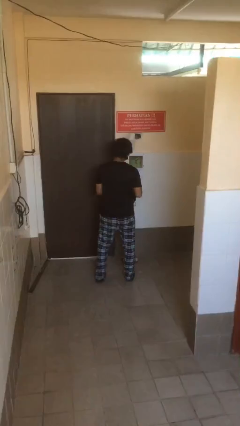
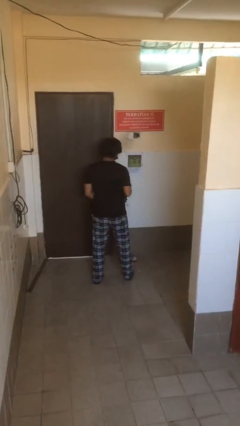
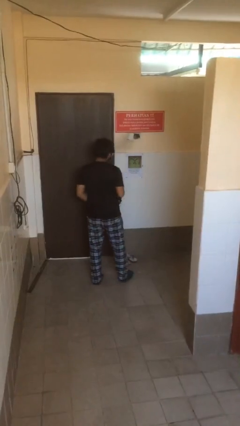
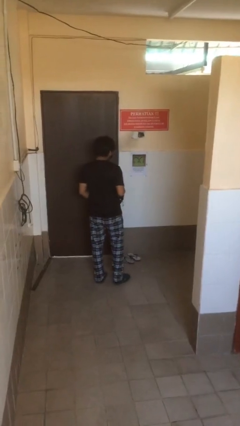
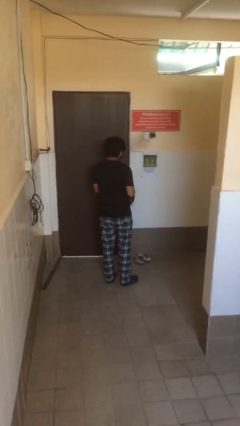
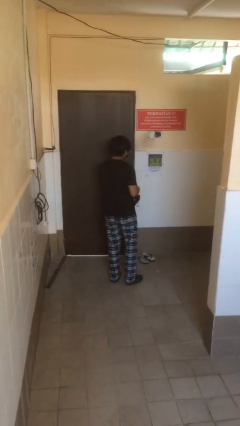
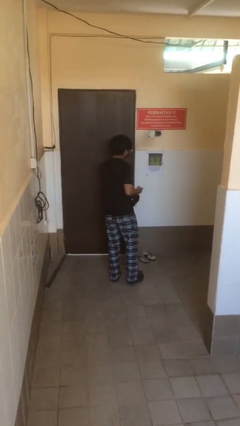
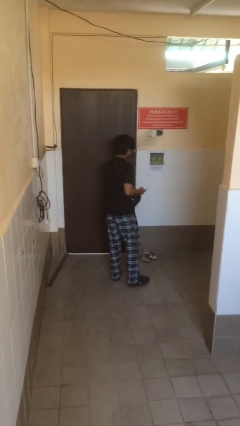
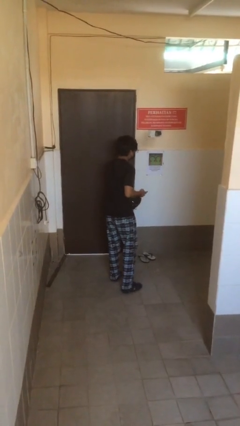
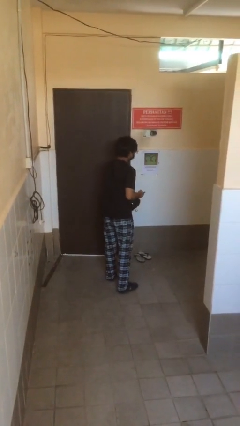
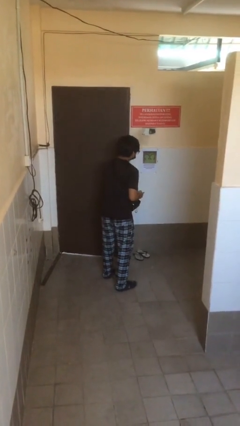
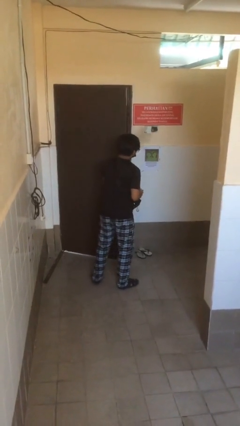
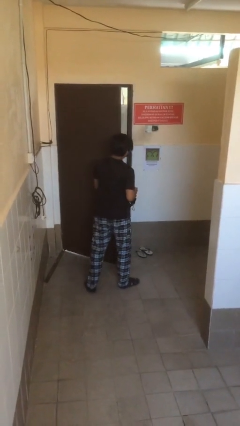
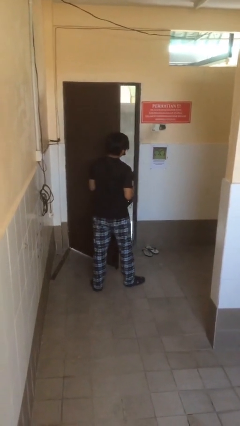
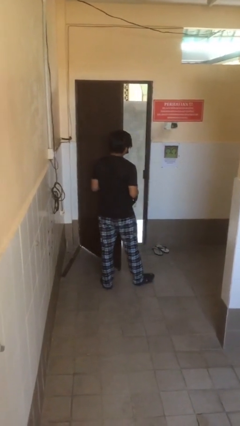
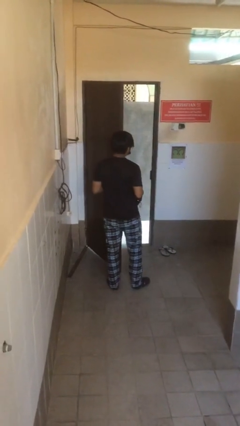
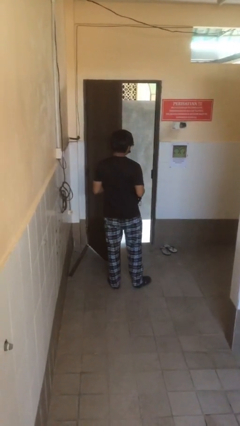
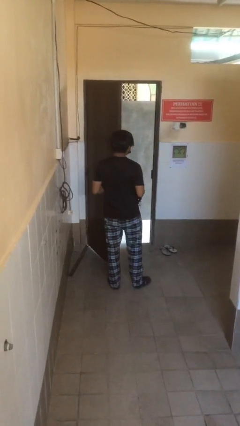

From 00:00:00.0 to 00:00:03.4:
person opens facility door

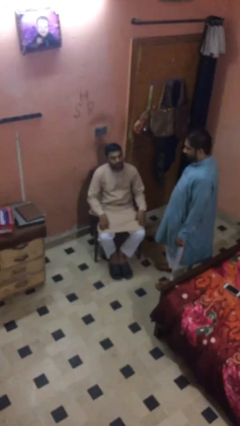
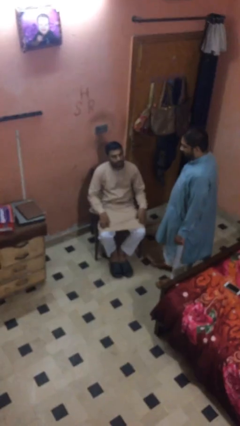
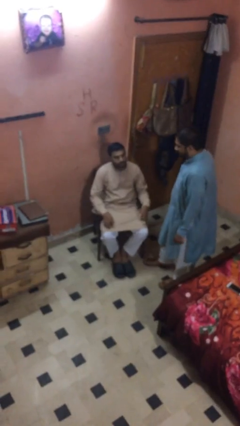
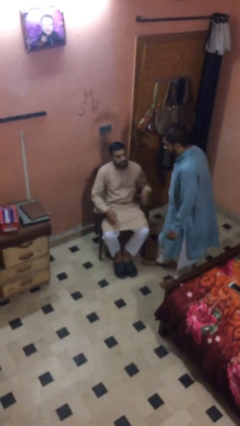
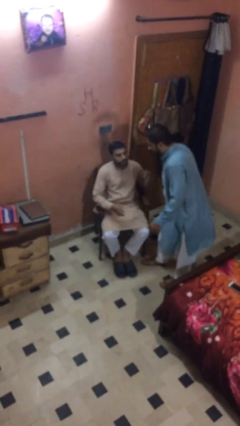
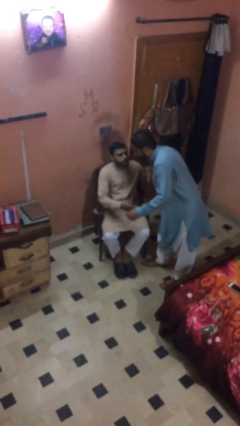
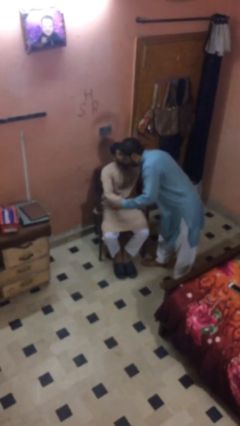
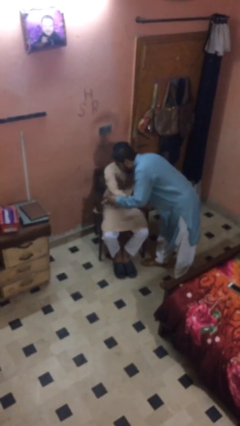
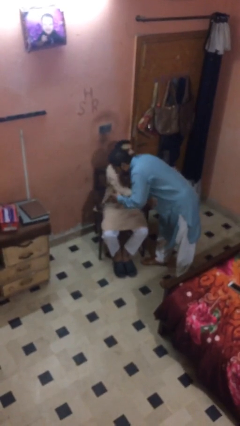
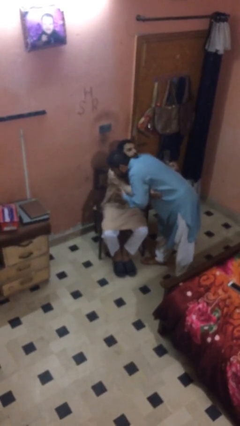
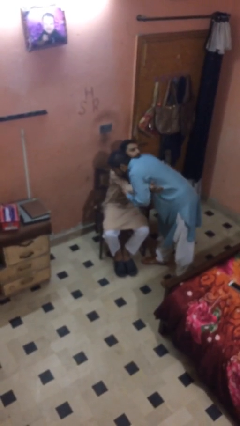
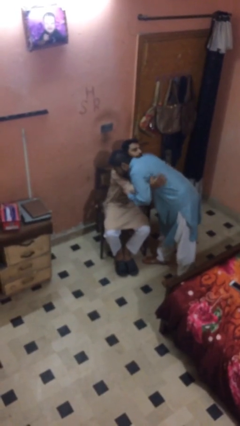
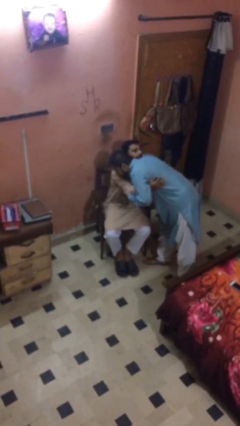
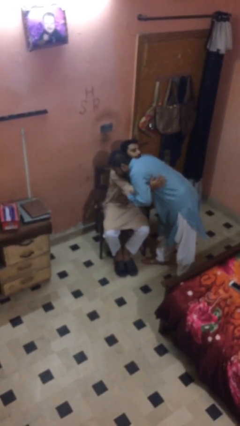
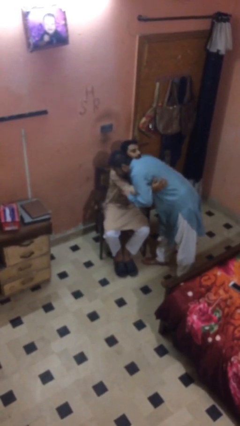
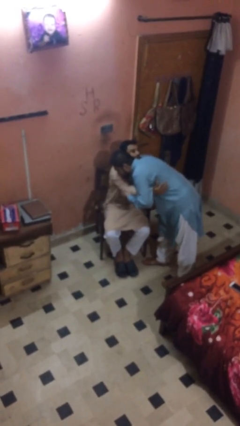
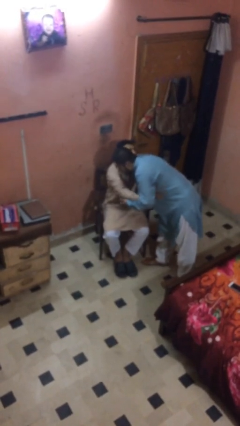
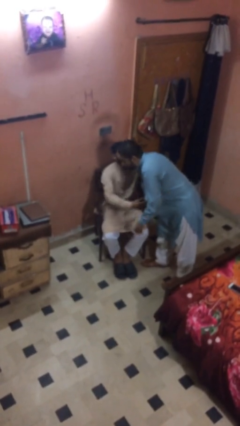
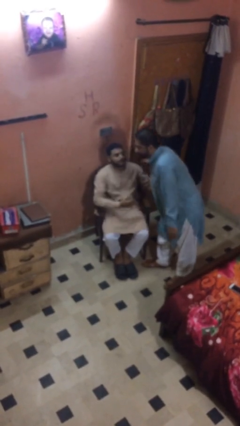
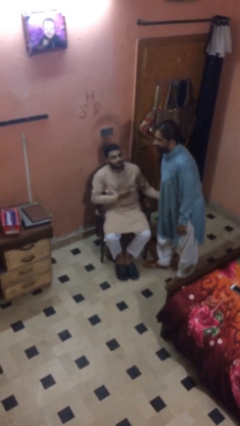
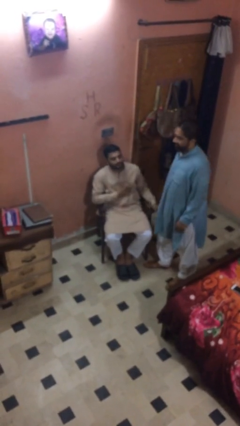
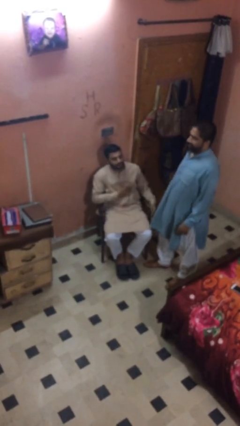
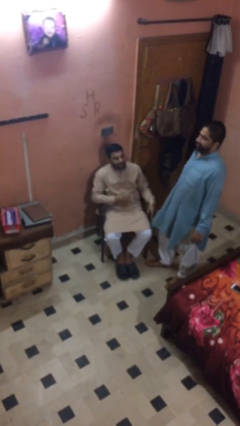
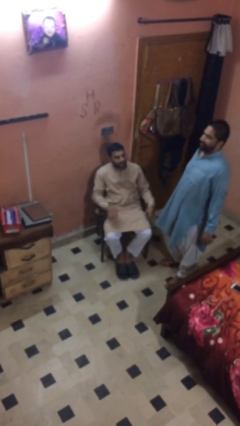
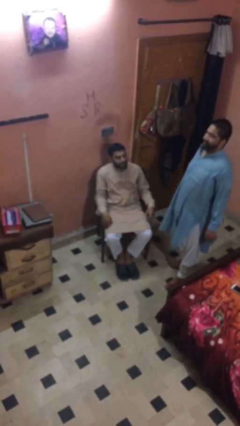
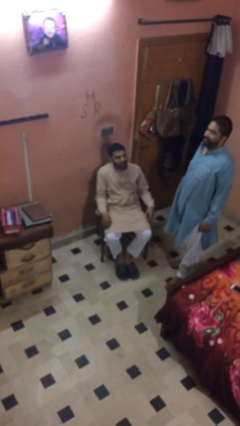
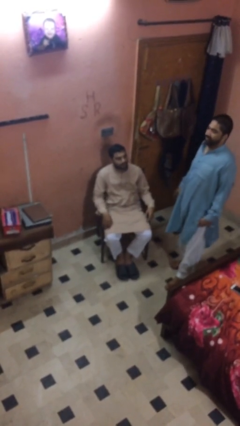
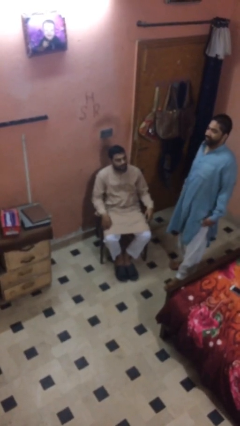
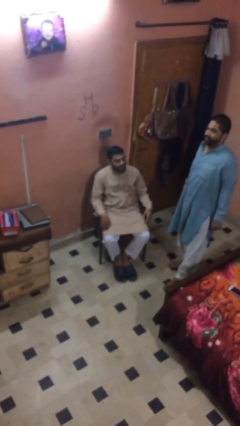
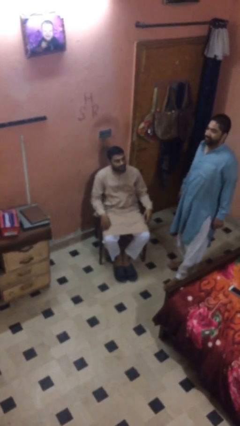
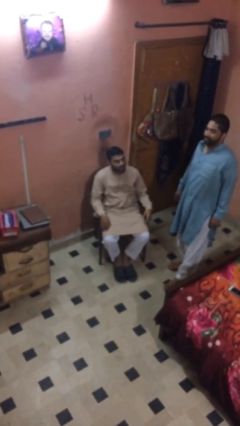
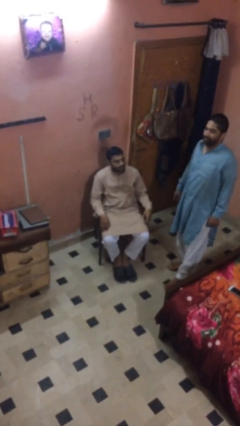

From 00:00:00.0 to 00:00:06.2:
person embraces person

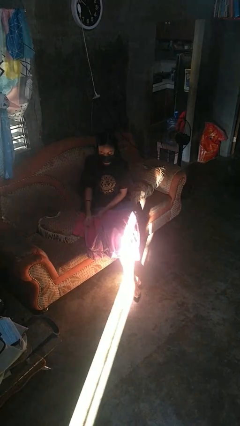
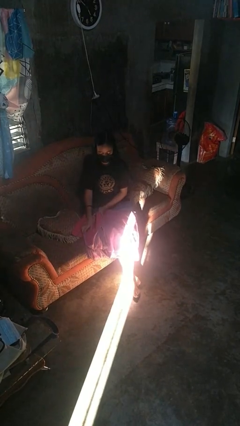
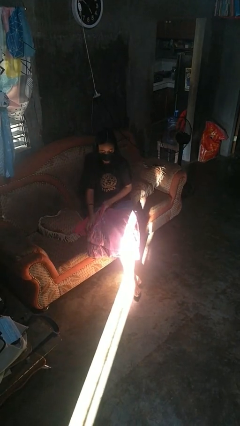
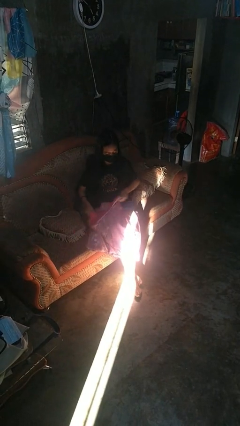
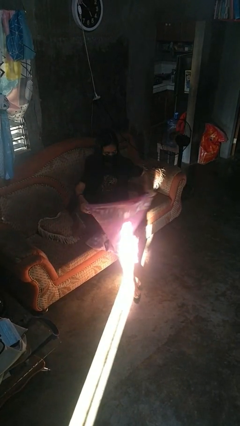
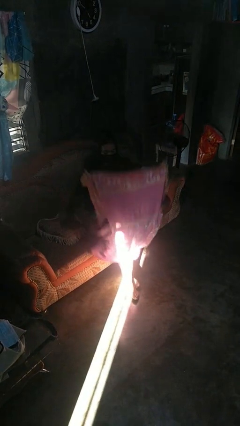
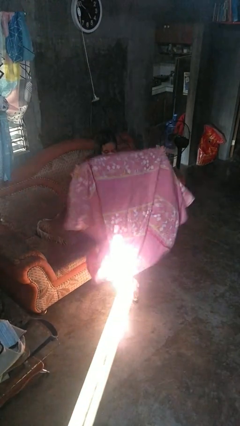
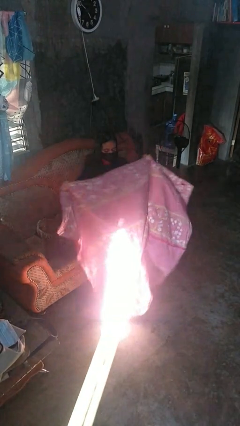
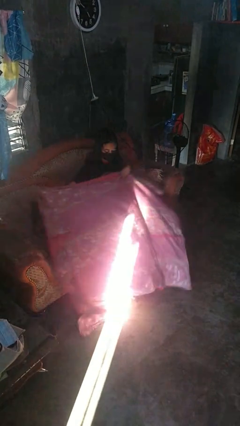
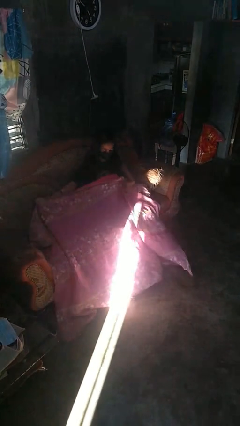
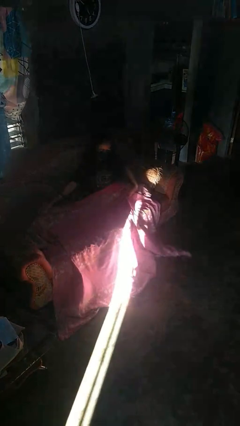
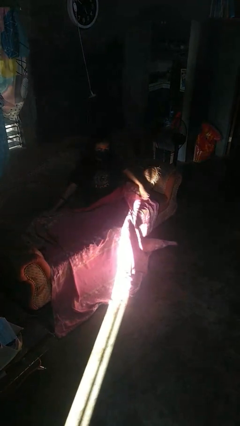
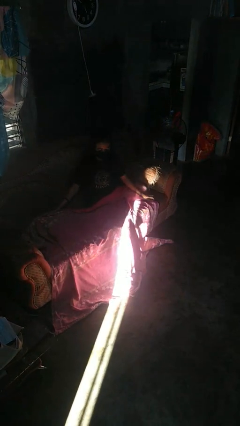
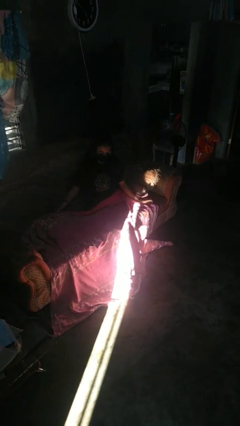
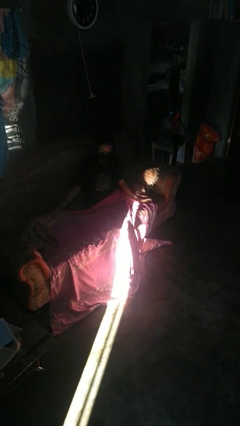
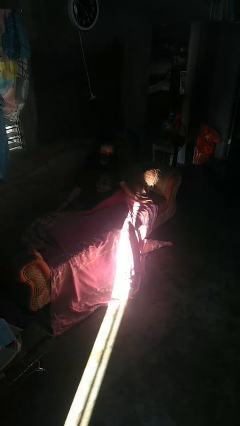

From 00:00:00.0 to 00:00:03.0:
person unfolds blanket

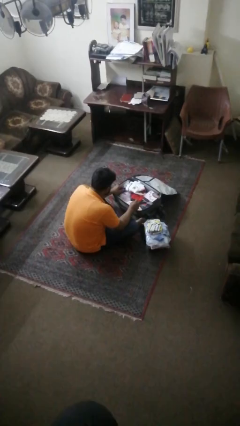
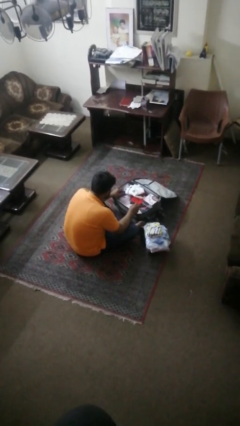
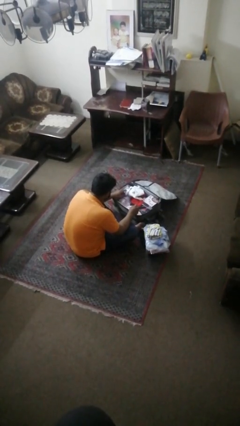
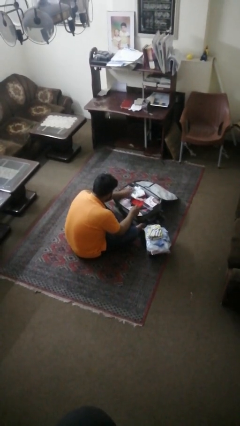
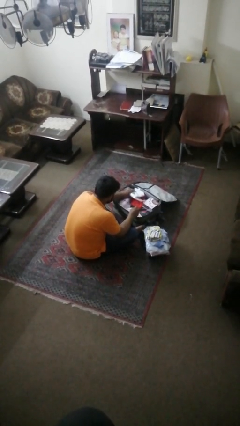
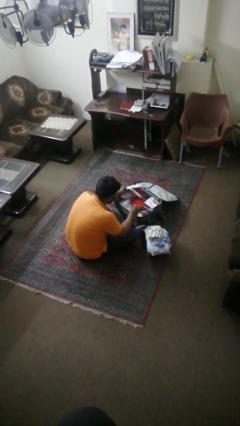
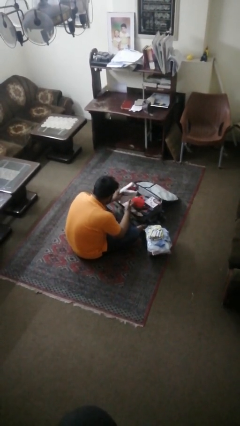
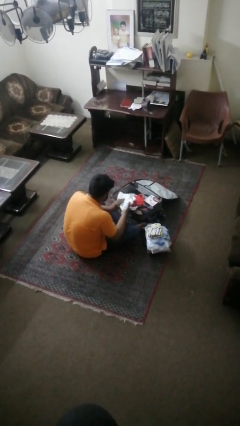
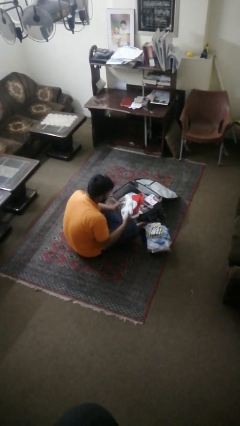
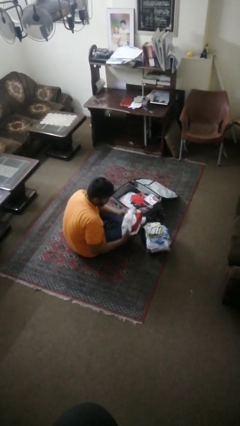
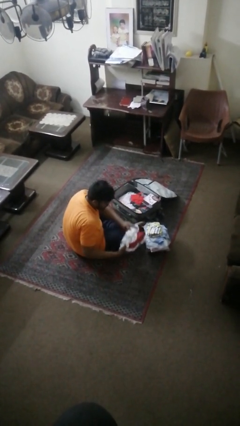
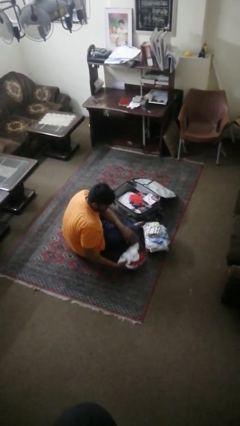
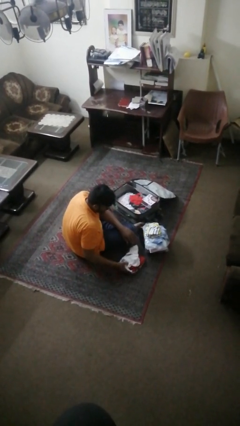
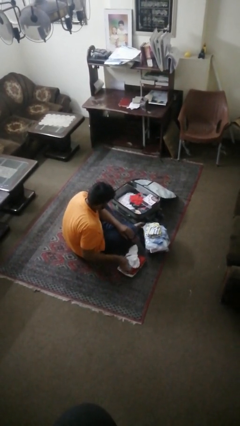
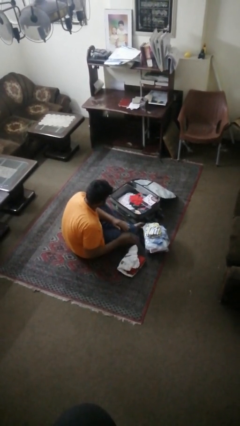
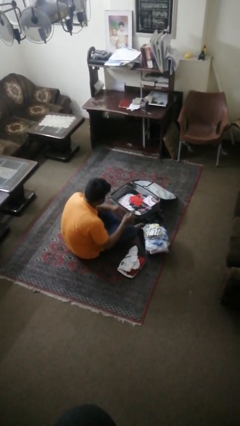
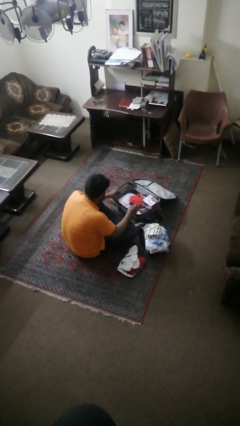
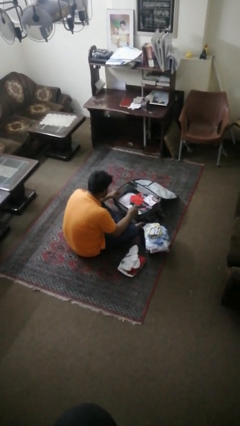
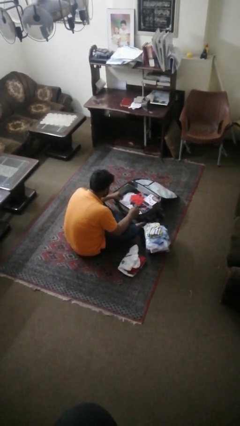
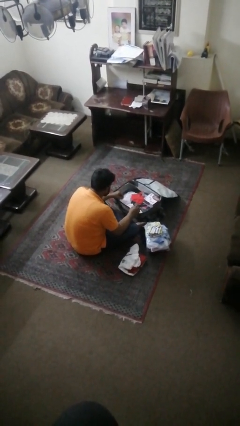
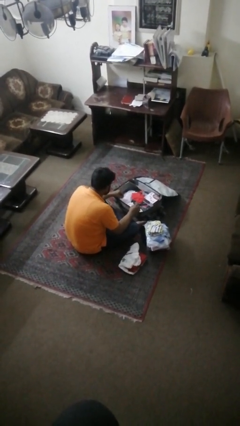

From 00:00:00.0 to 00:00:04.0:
person unloads clothes from suitcase

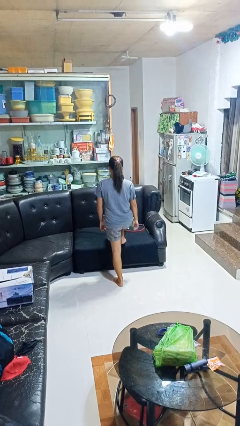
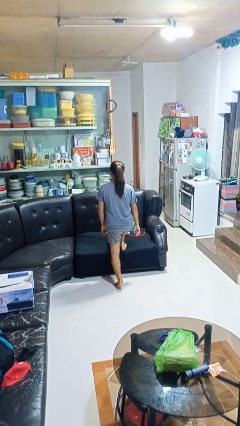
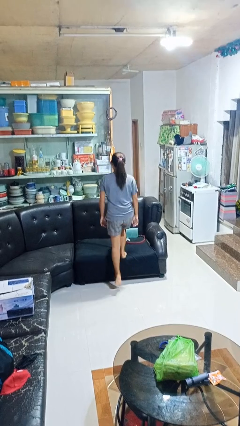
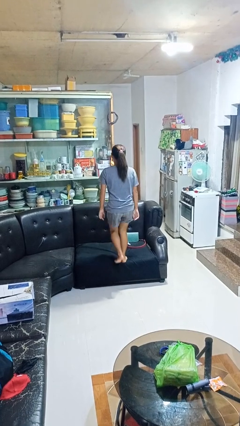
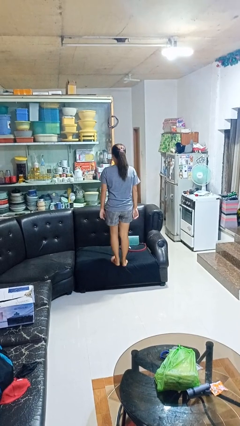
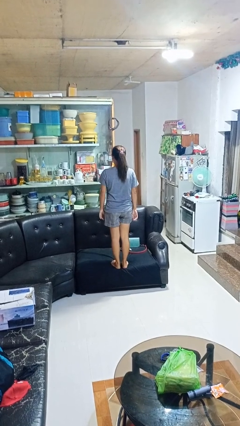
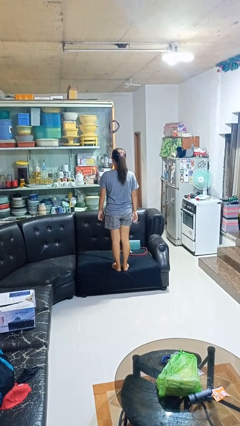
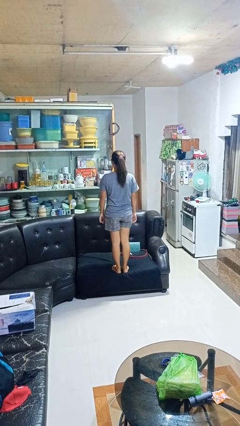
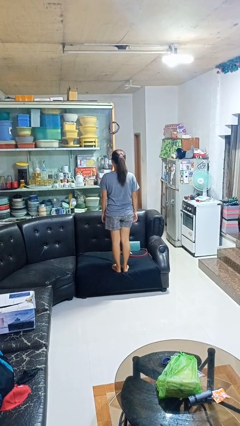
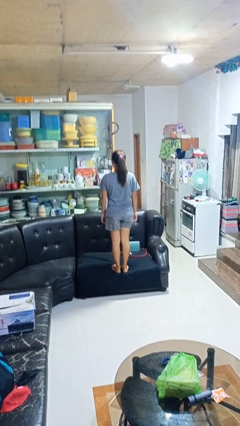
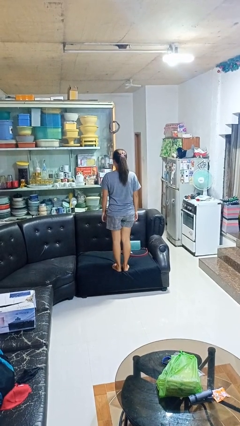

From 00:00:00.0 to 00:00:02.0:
person climbs on couch
